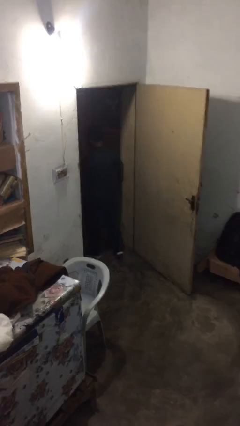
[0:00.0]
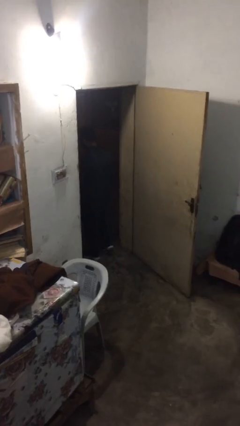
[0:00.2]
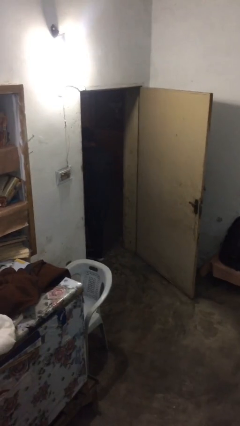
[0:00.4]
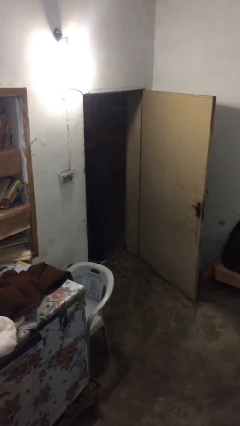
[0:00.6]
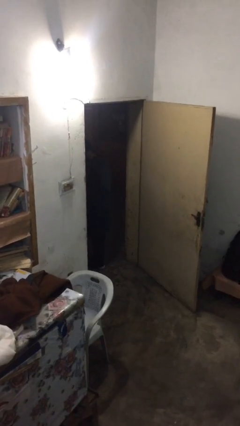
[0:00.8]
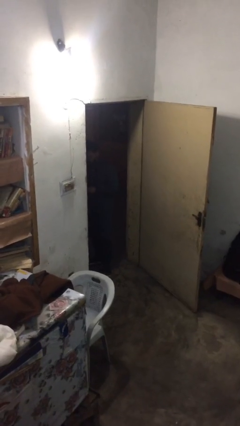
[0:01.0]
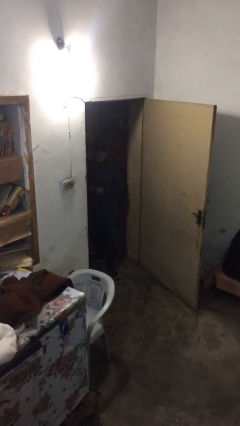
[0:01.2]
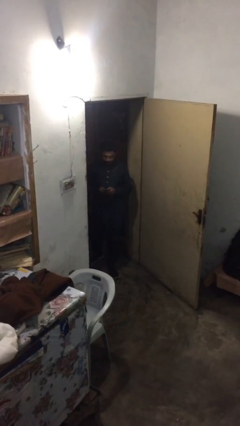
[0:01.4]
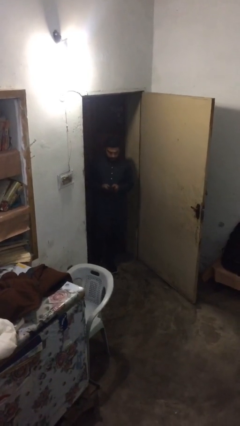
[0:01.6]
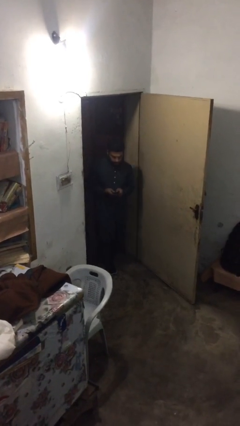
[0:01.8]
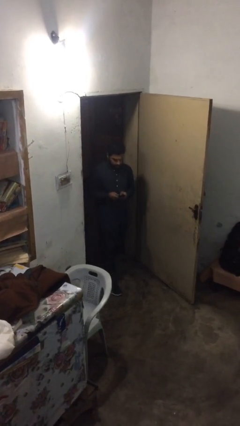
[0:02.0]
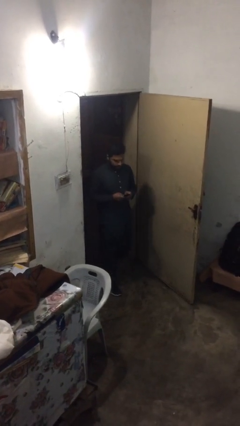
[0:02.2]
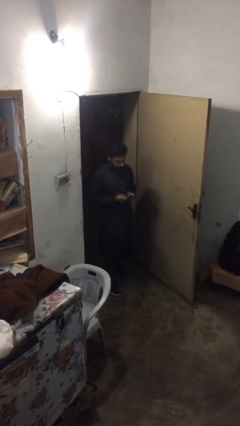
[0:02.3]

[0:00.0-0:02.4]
person enters scene through structure

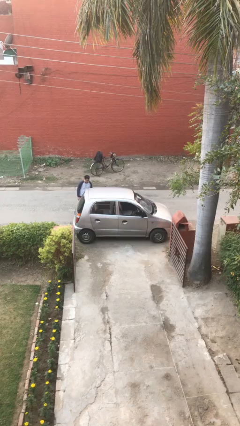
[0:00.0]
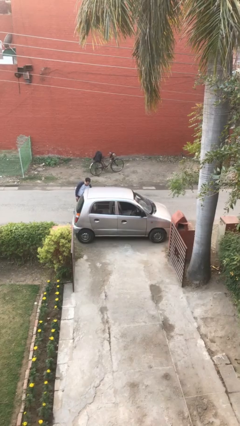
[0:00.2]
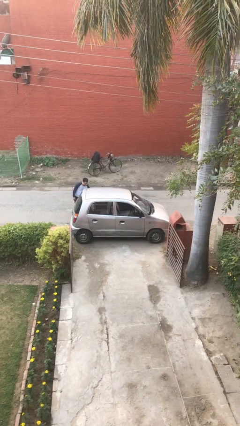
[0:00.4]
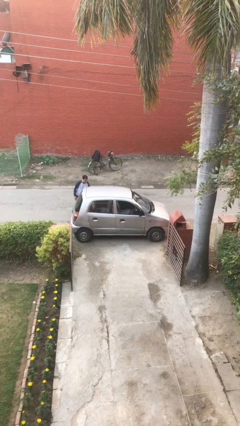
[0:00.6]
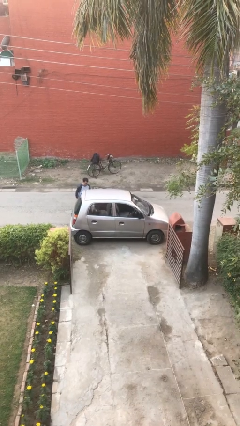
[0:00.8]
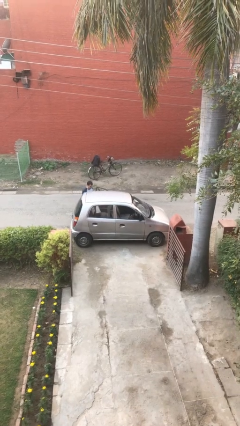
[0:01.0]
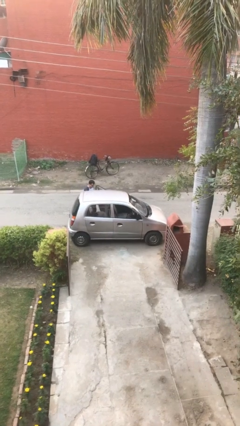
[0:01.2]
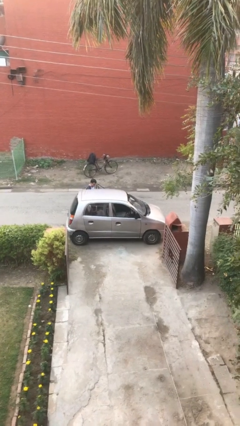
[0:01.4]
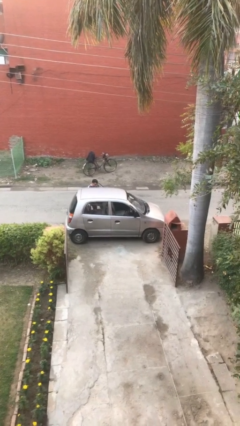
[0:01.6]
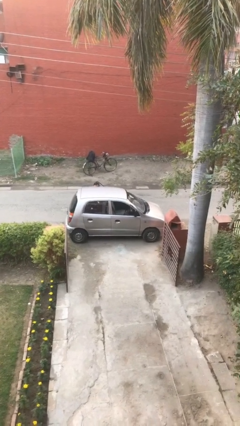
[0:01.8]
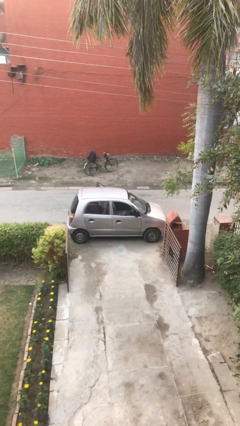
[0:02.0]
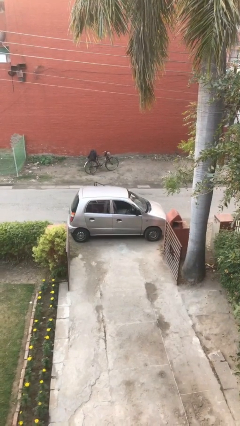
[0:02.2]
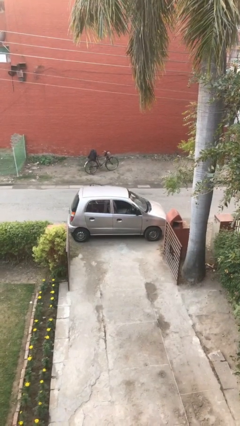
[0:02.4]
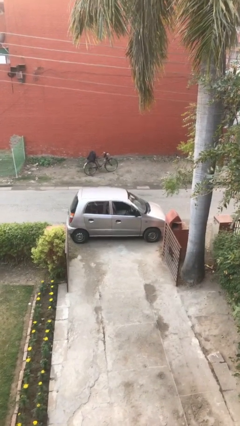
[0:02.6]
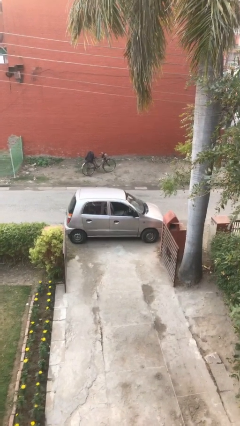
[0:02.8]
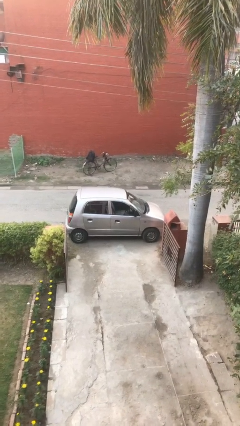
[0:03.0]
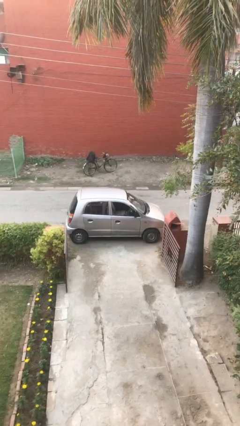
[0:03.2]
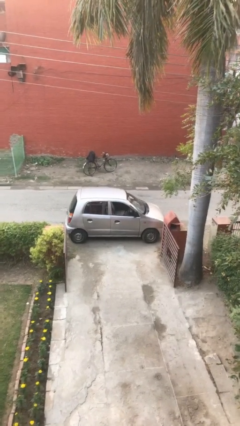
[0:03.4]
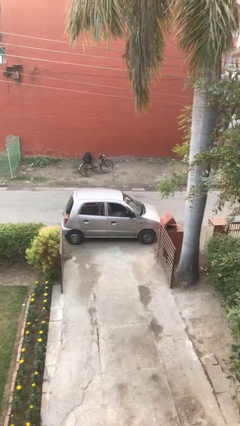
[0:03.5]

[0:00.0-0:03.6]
car picks up person

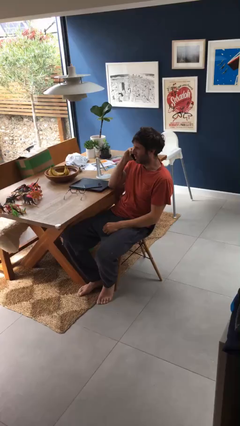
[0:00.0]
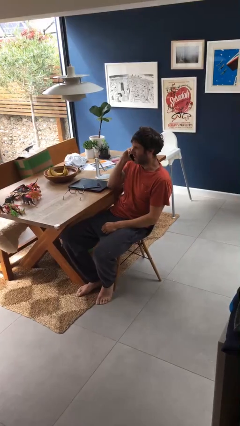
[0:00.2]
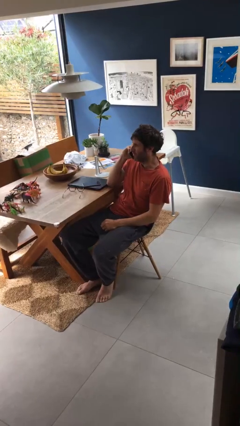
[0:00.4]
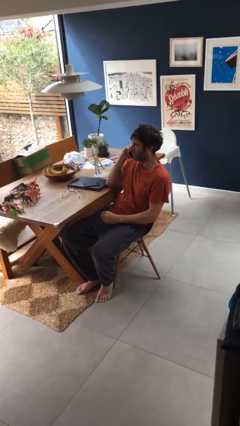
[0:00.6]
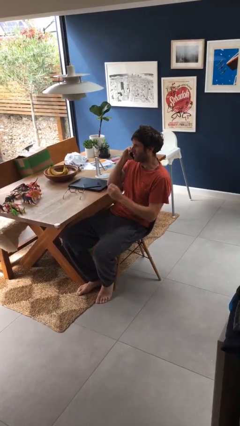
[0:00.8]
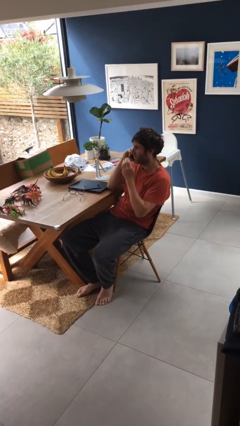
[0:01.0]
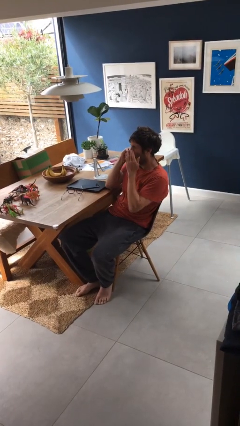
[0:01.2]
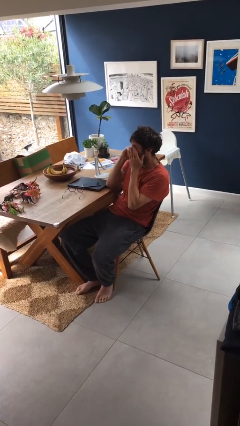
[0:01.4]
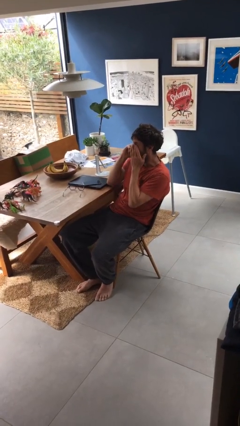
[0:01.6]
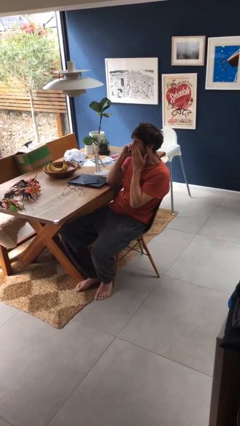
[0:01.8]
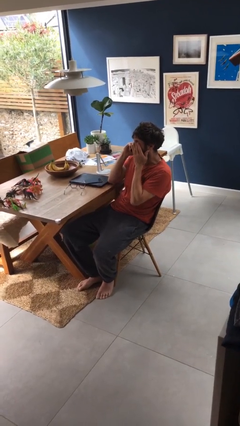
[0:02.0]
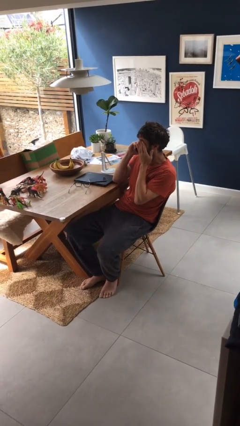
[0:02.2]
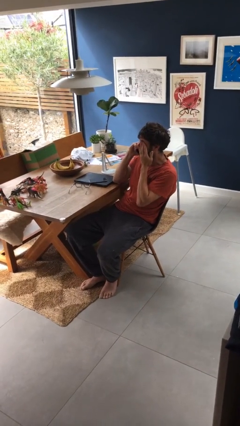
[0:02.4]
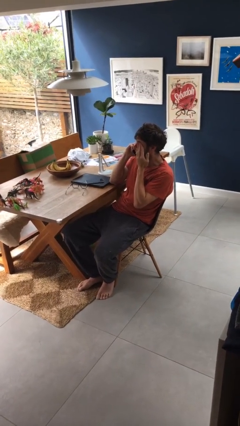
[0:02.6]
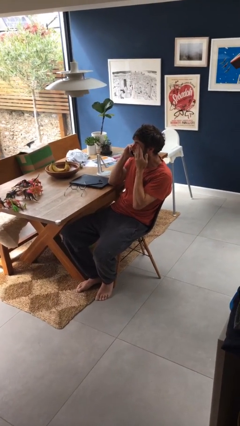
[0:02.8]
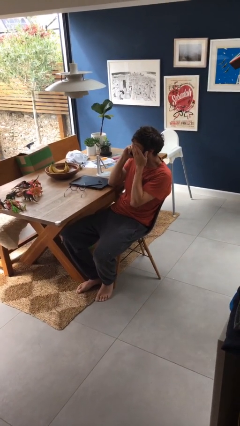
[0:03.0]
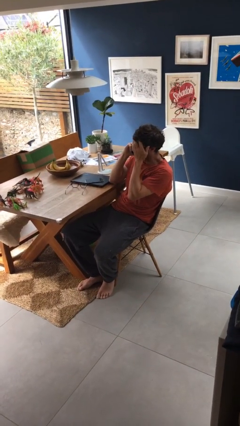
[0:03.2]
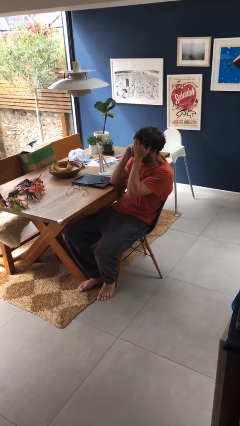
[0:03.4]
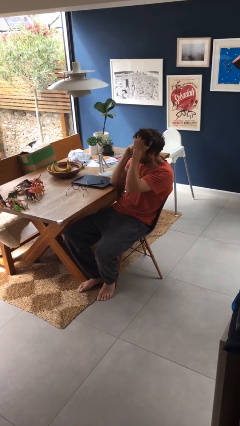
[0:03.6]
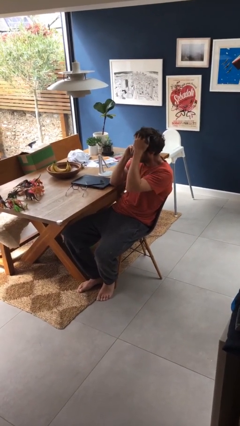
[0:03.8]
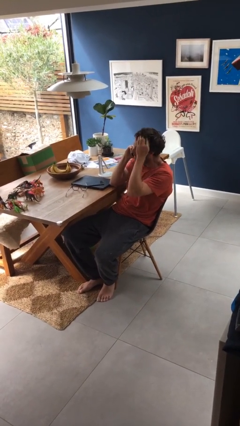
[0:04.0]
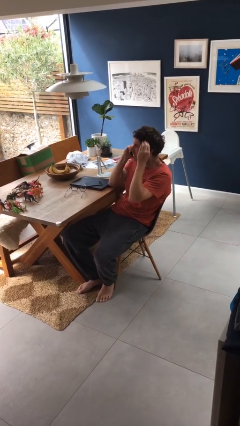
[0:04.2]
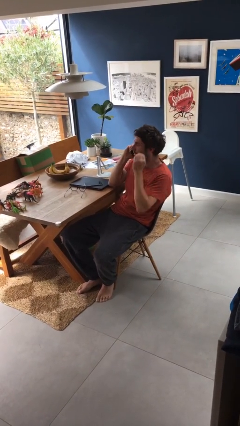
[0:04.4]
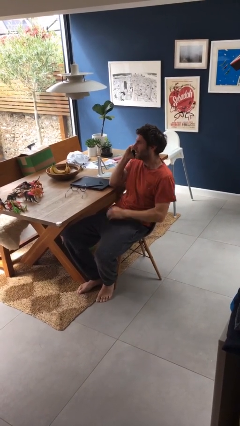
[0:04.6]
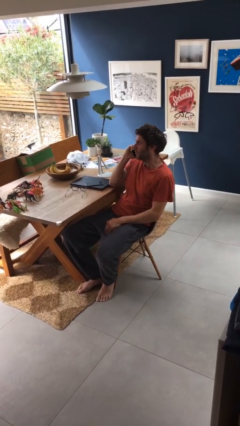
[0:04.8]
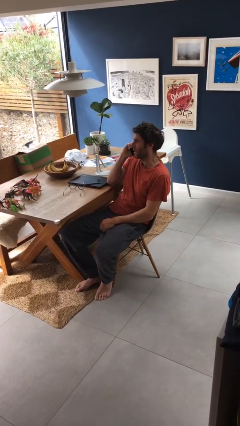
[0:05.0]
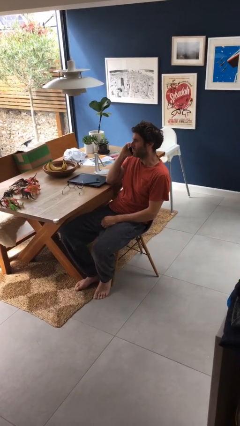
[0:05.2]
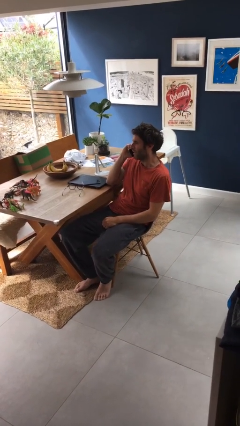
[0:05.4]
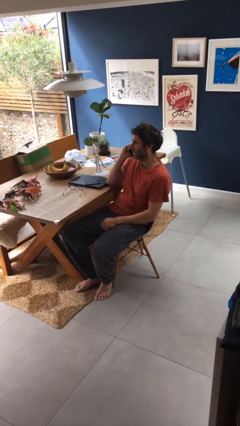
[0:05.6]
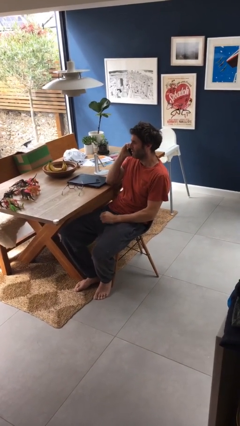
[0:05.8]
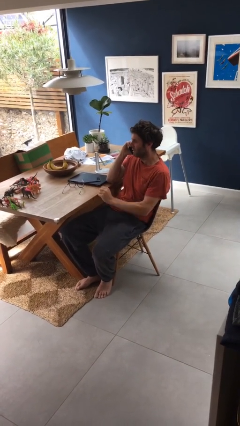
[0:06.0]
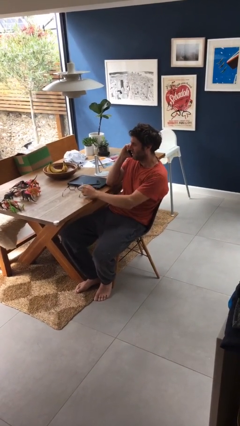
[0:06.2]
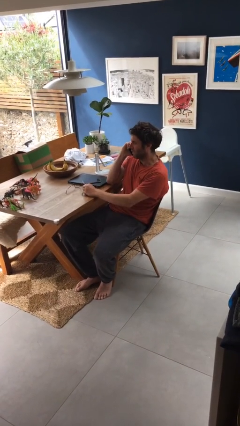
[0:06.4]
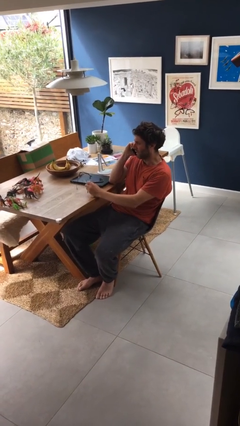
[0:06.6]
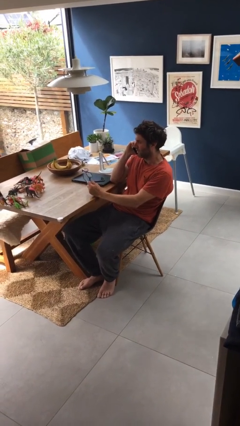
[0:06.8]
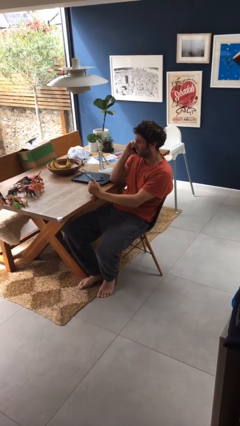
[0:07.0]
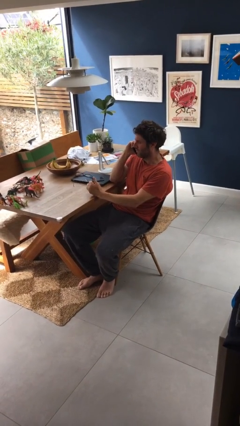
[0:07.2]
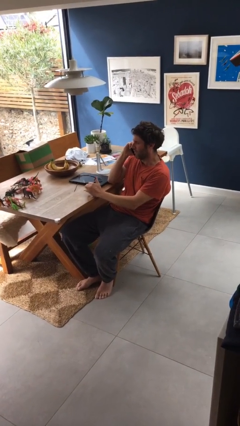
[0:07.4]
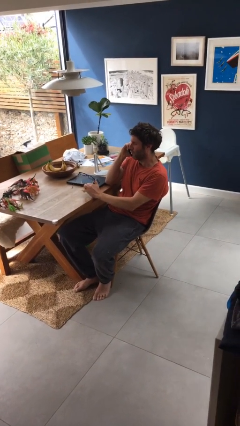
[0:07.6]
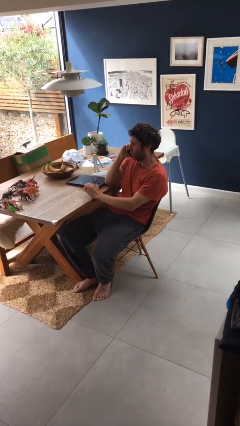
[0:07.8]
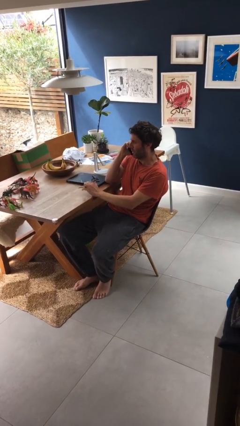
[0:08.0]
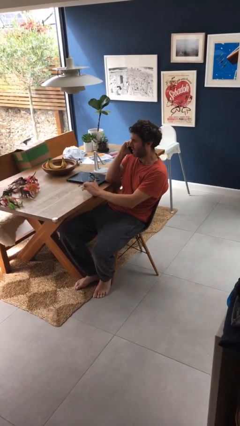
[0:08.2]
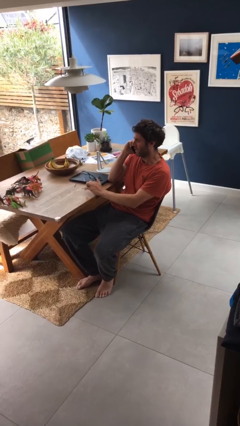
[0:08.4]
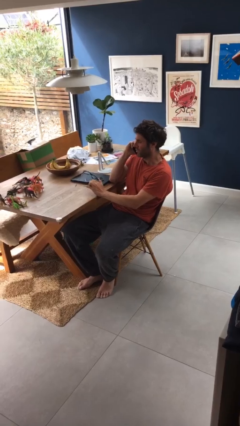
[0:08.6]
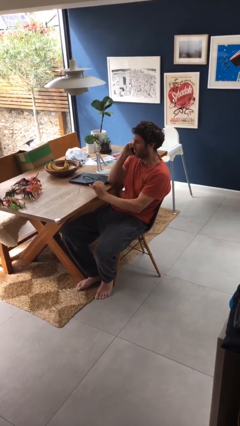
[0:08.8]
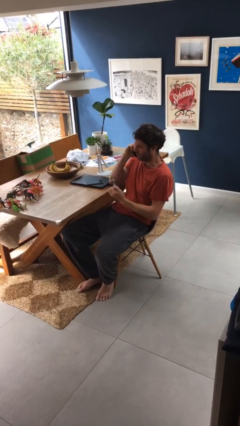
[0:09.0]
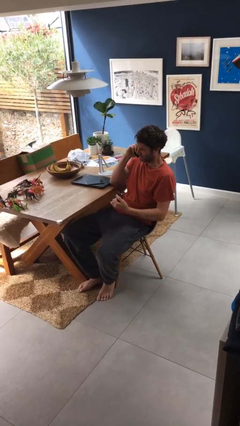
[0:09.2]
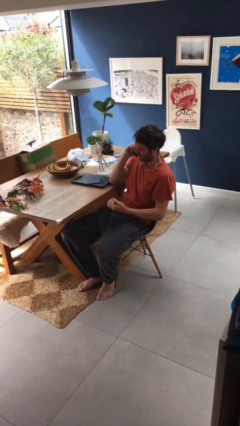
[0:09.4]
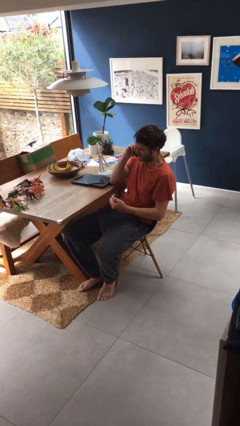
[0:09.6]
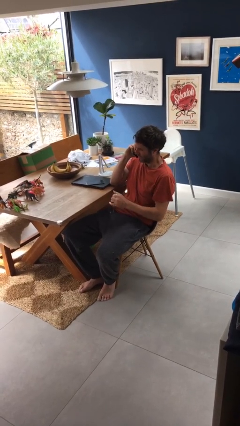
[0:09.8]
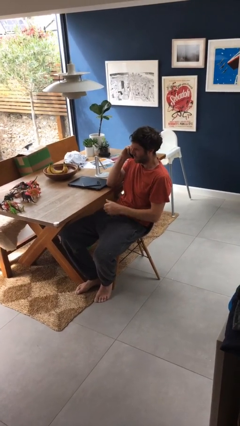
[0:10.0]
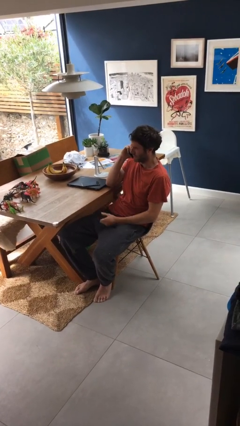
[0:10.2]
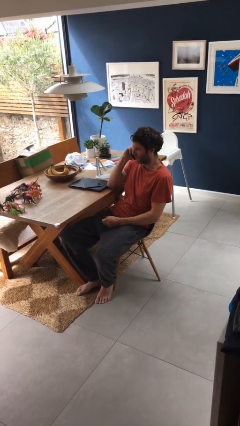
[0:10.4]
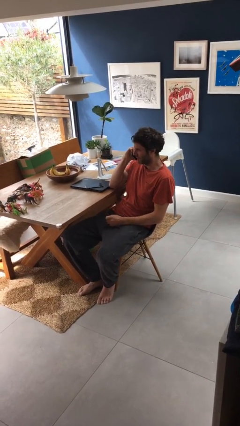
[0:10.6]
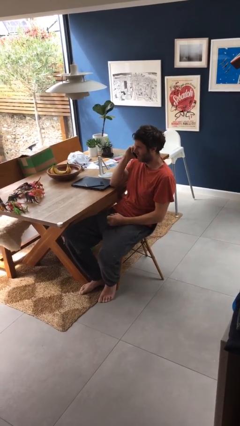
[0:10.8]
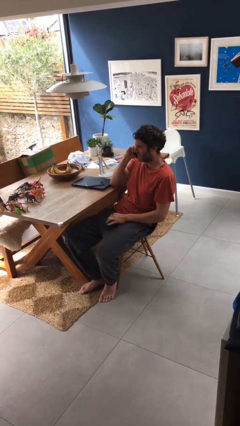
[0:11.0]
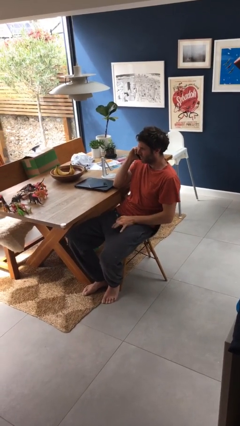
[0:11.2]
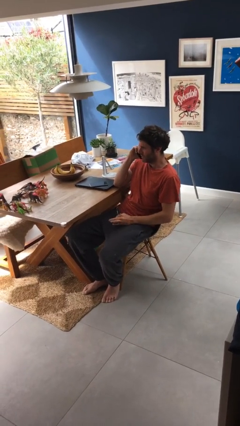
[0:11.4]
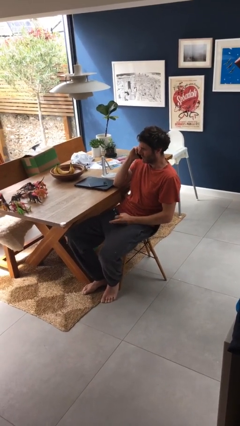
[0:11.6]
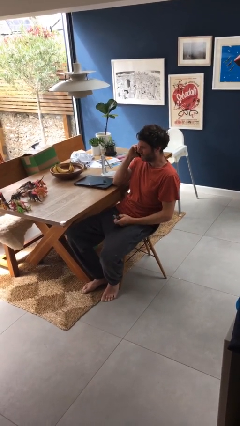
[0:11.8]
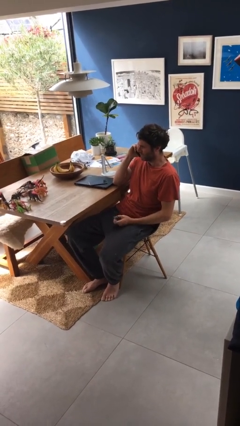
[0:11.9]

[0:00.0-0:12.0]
person talks on phone
